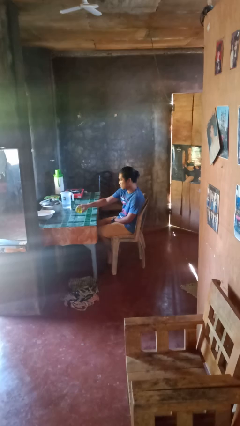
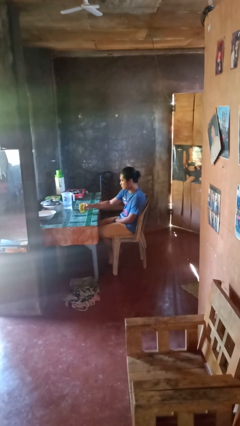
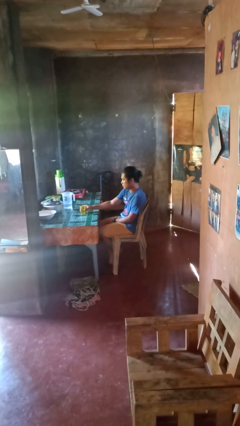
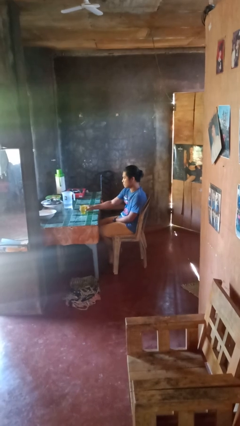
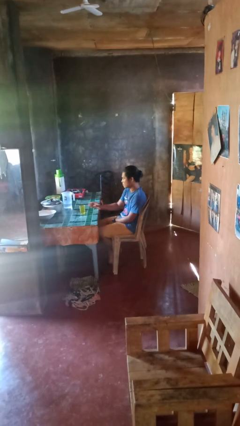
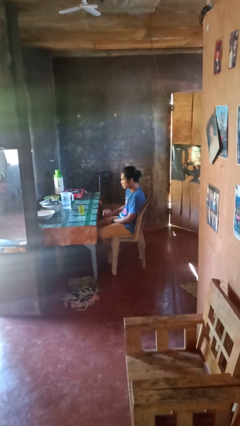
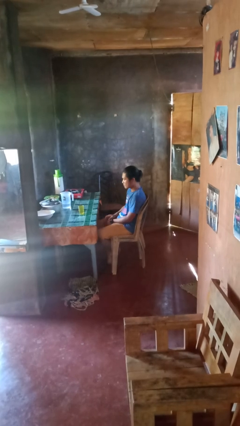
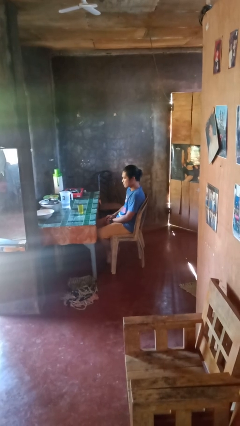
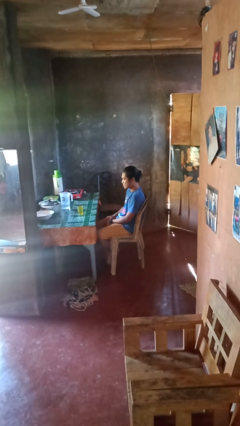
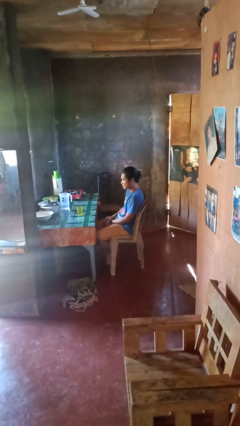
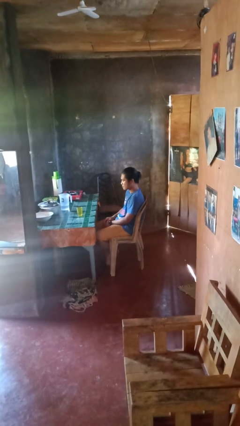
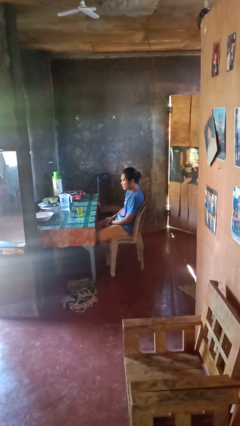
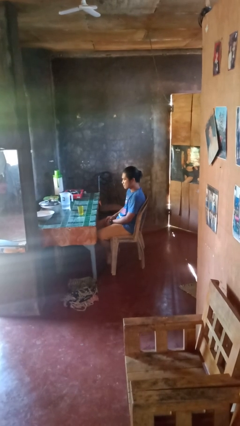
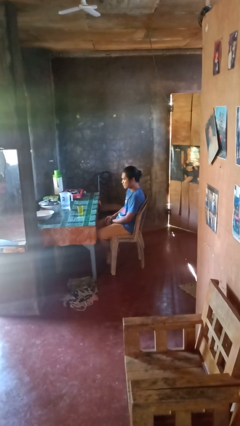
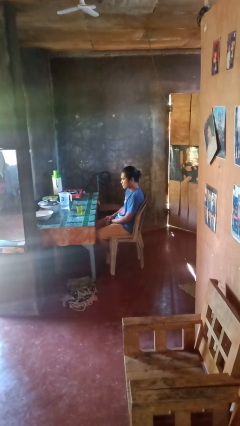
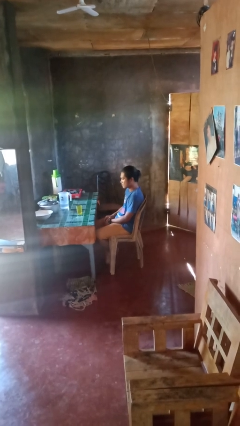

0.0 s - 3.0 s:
person sets upright glass

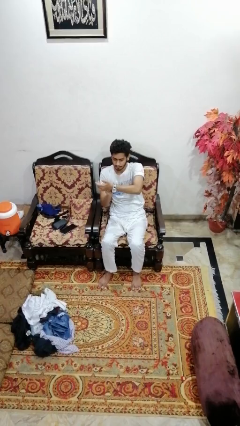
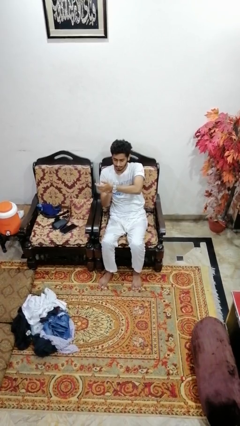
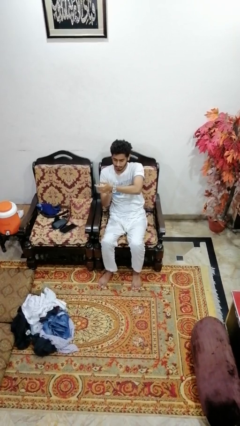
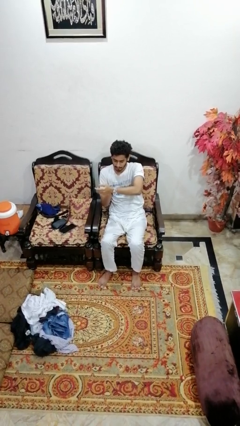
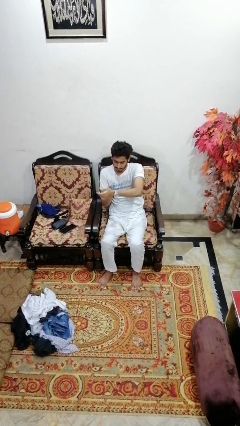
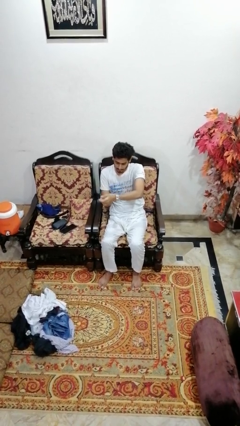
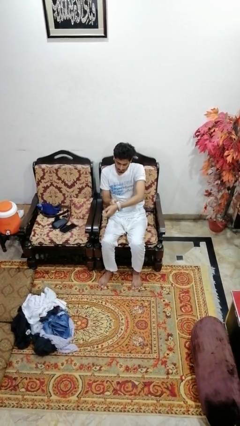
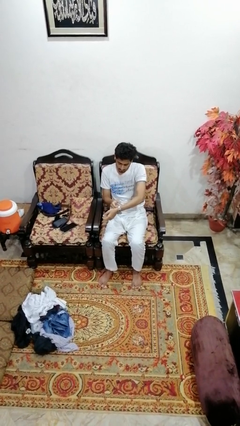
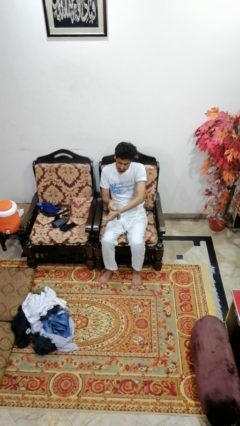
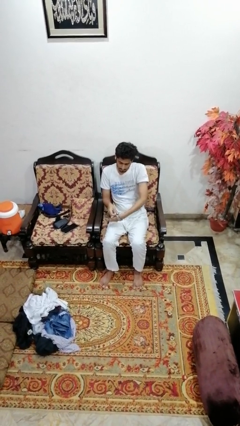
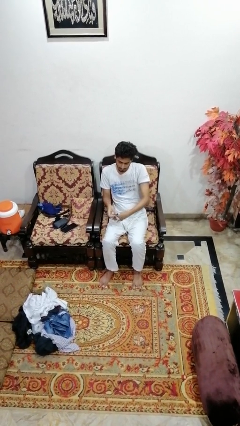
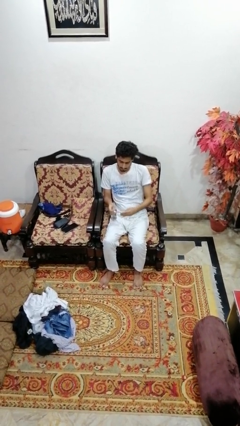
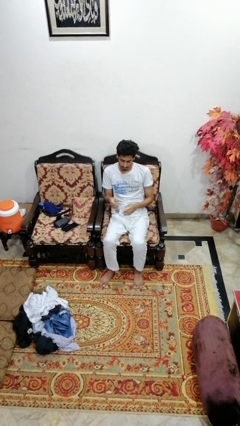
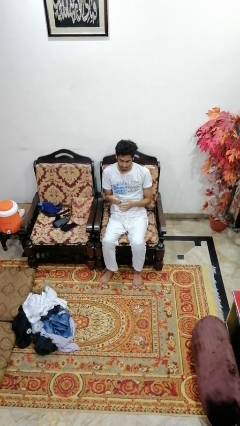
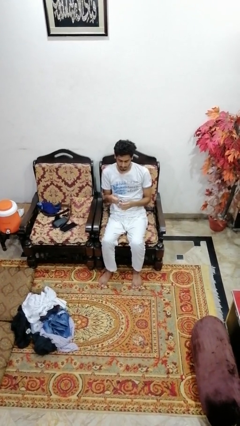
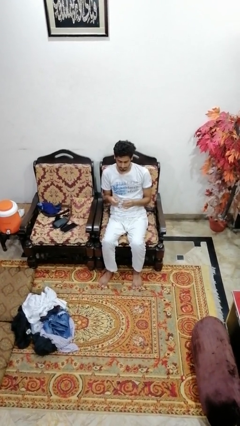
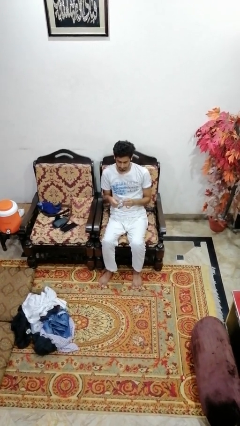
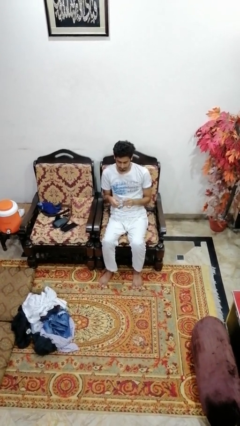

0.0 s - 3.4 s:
person takes off wristwatch

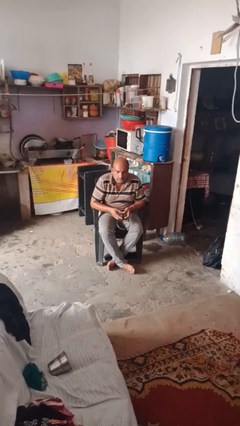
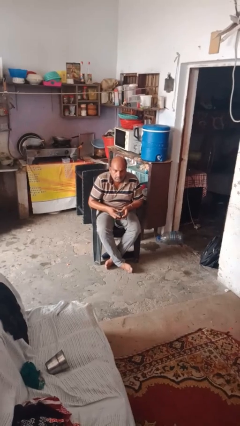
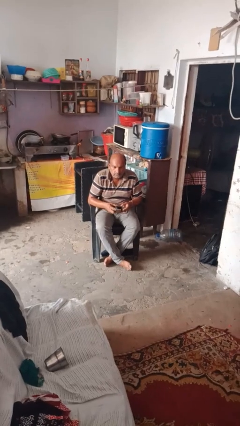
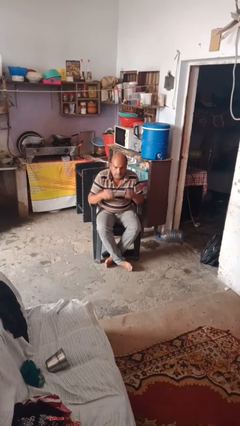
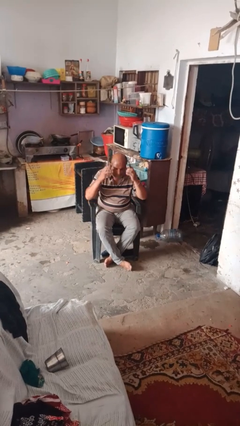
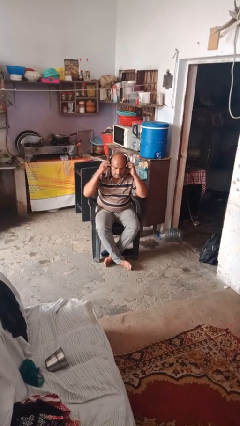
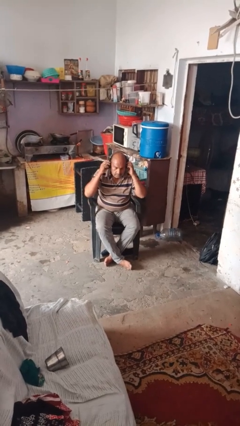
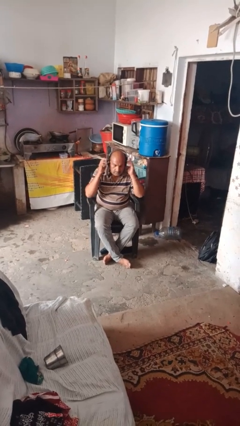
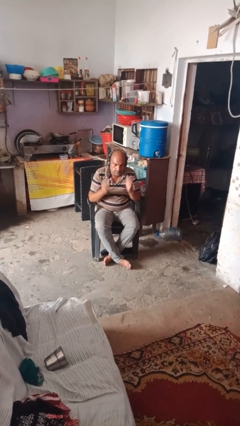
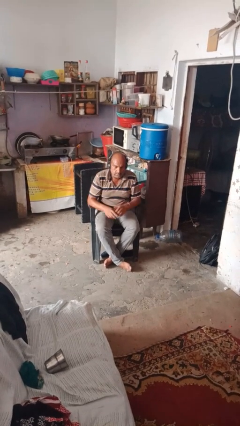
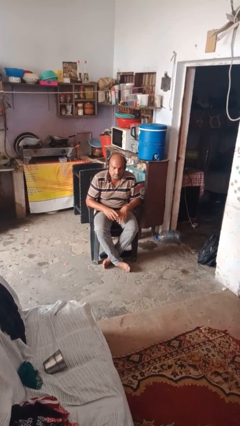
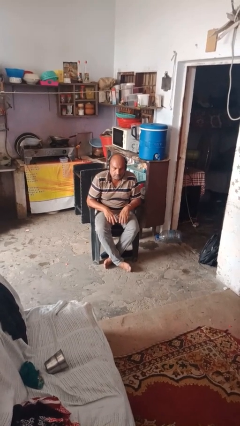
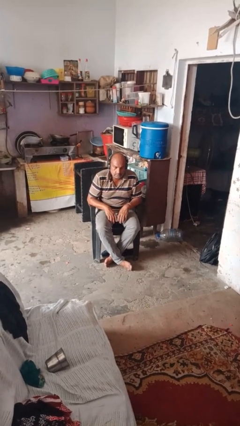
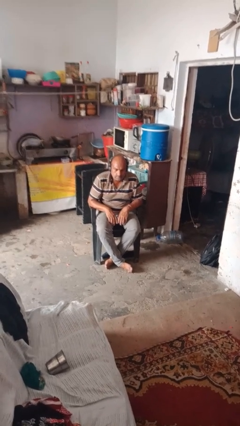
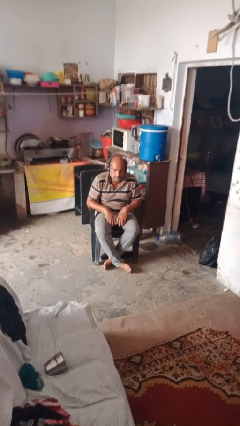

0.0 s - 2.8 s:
person puts on headphones

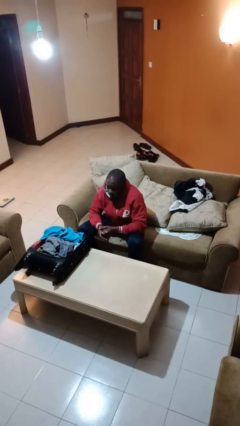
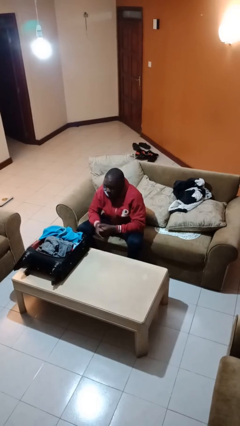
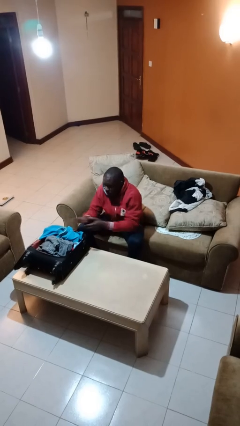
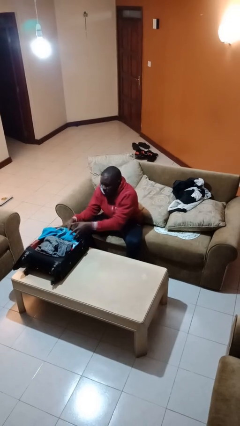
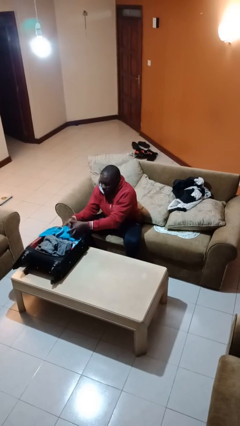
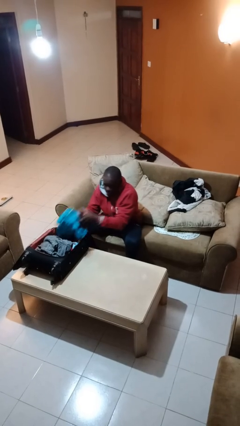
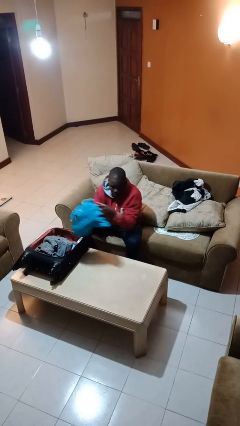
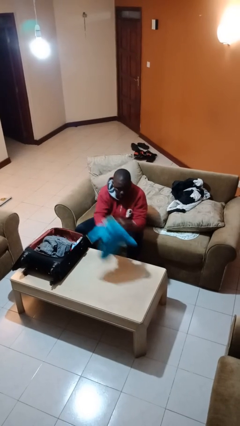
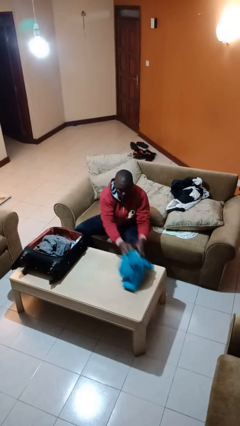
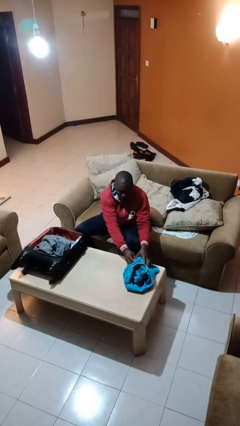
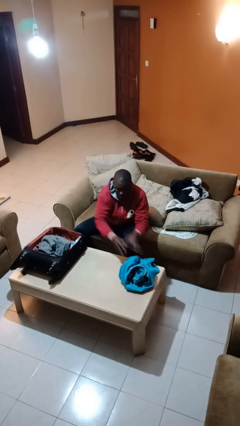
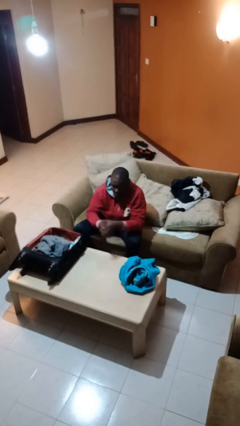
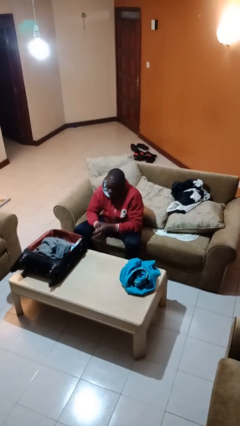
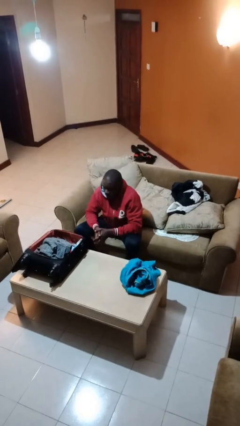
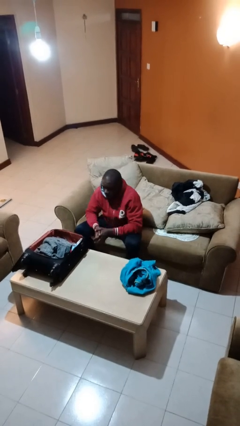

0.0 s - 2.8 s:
person unloads clothes from suitcase

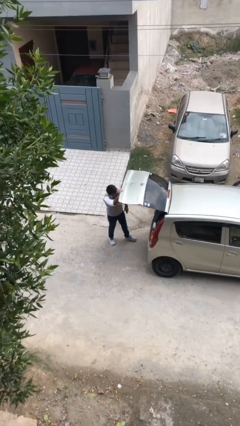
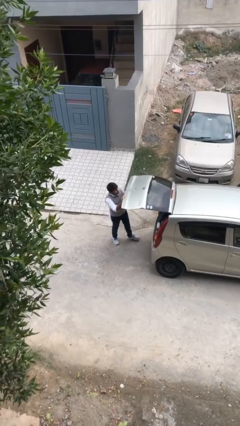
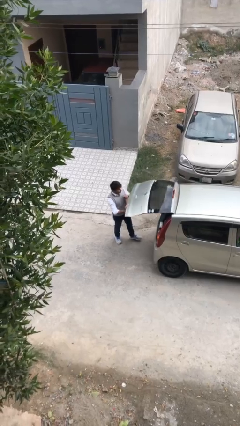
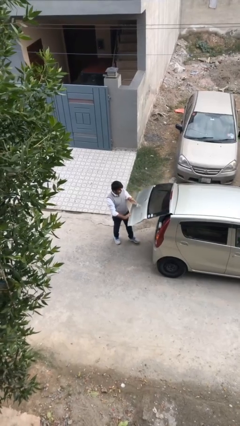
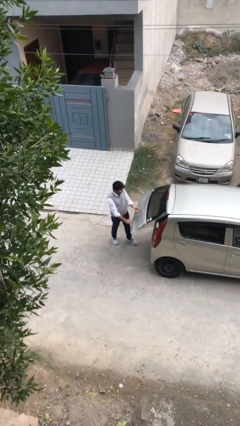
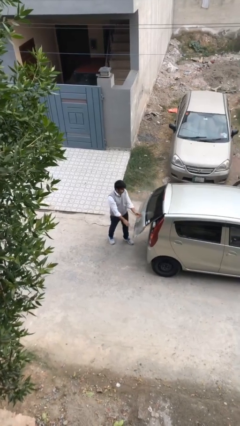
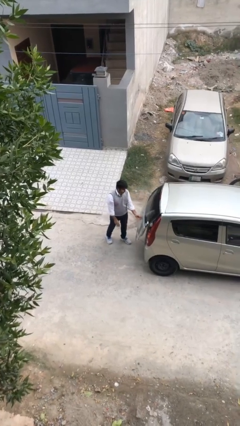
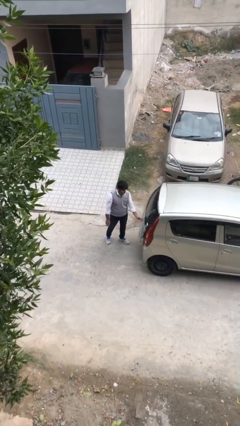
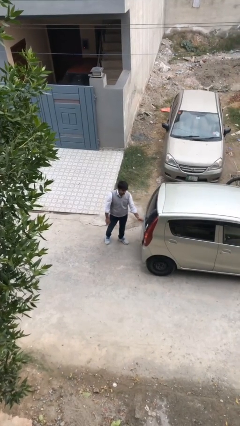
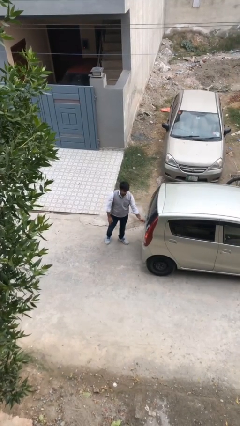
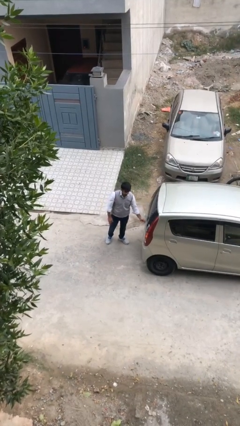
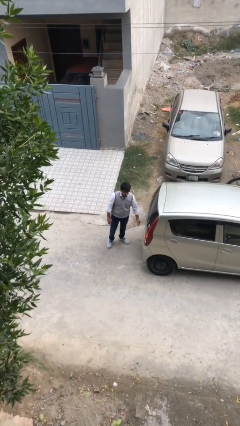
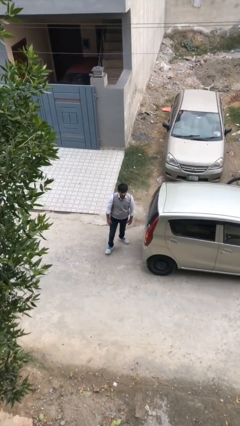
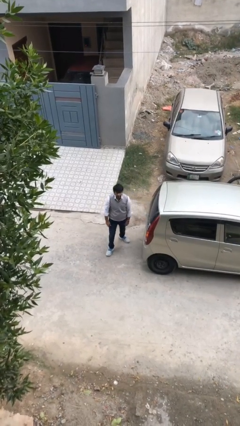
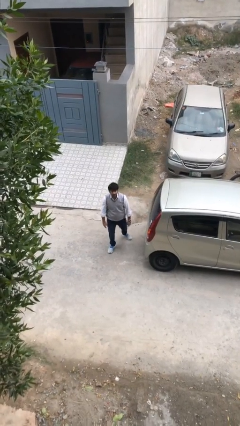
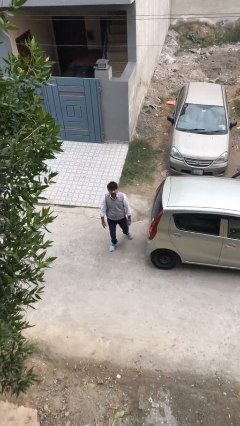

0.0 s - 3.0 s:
person closes car trunk

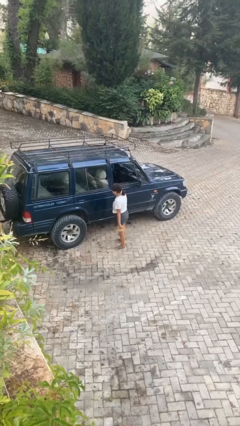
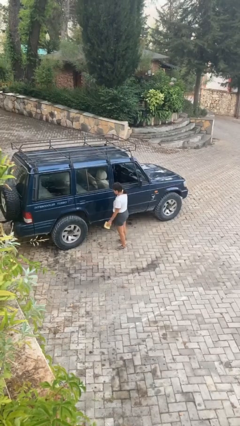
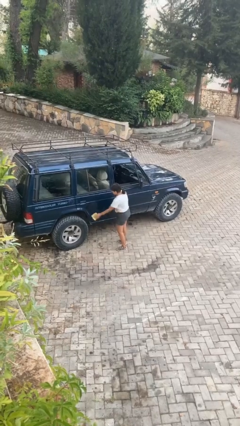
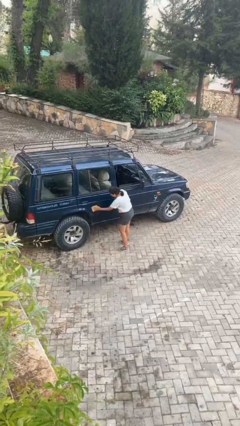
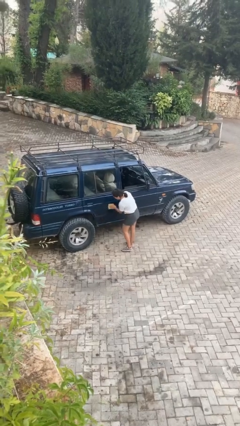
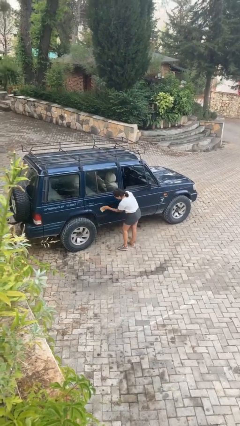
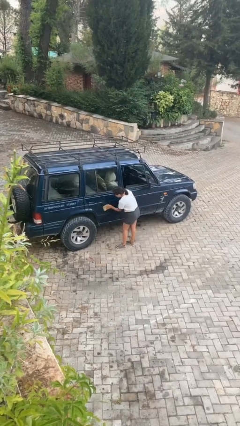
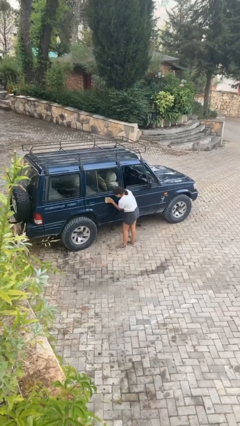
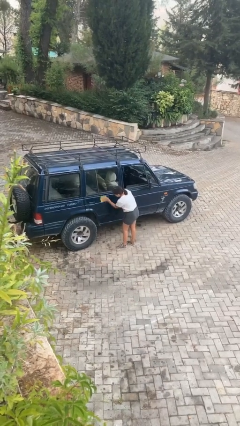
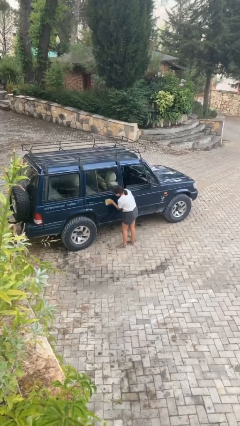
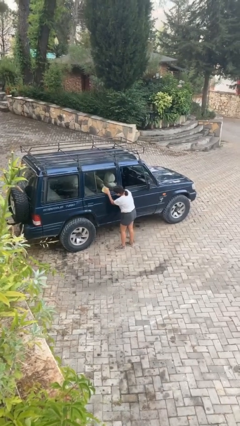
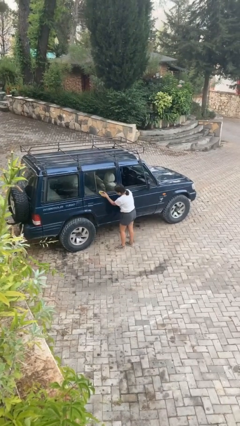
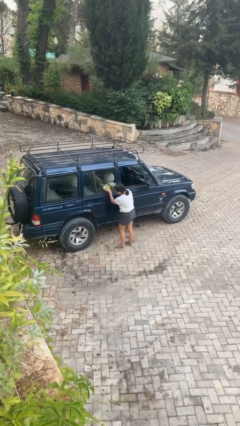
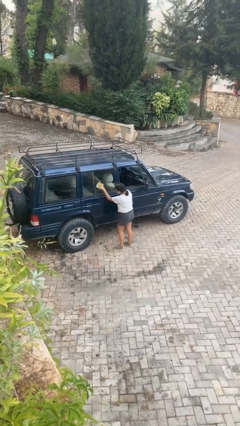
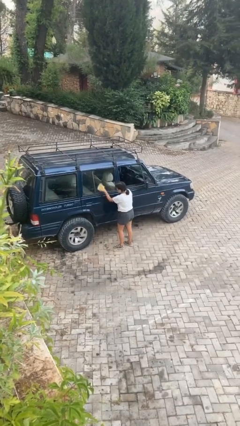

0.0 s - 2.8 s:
person polishes car with rag
